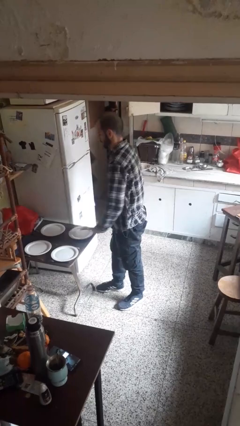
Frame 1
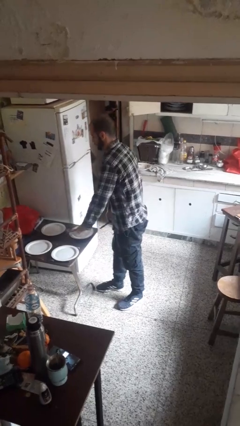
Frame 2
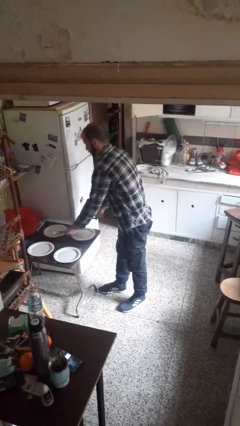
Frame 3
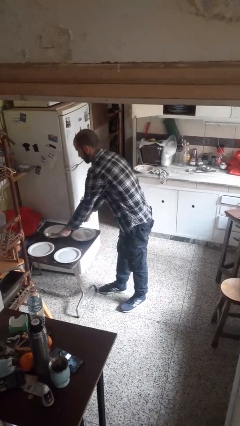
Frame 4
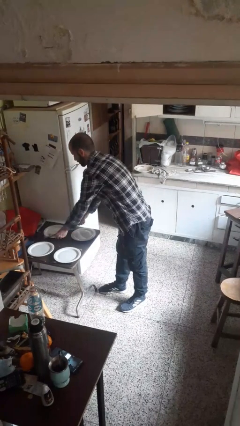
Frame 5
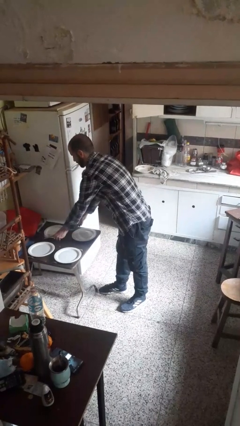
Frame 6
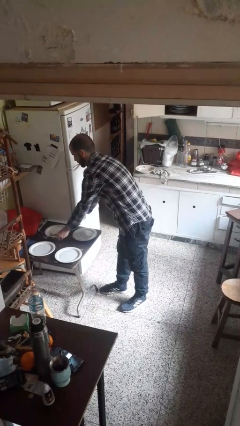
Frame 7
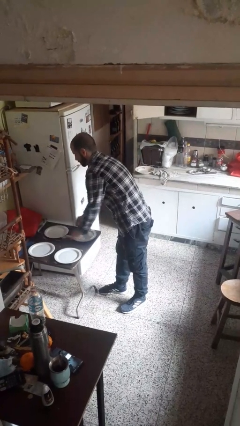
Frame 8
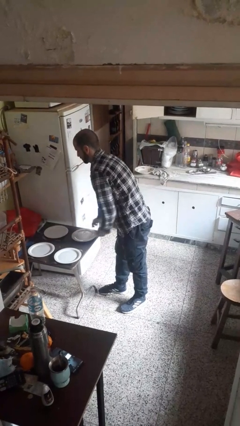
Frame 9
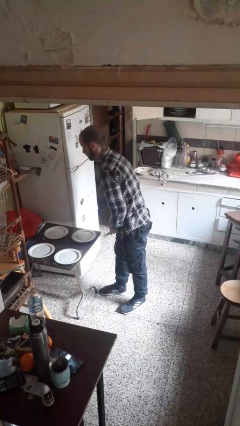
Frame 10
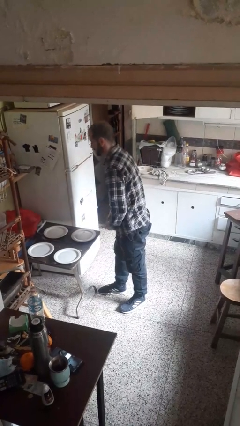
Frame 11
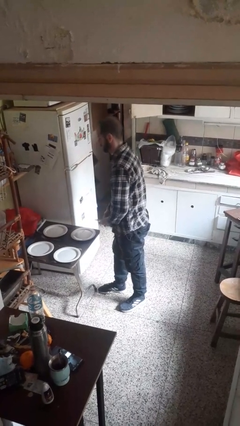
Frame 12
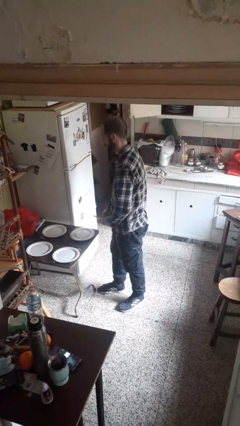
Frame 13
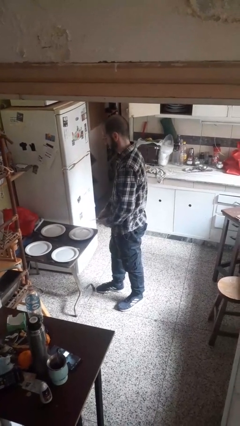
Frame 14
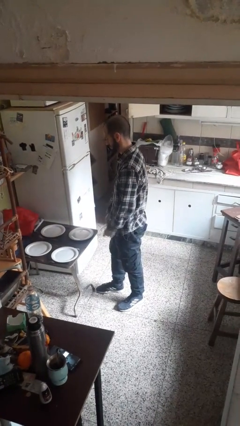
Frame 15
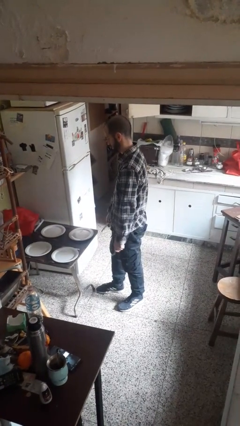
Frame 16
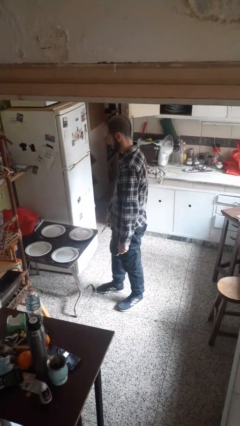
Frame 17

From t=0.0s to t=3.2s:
person sets table

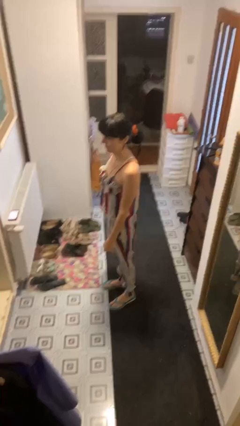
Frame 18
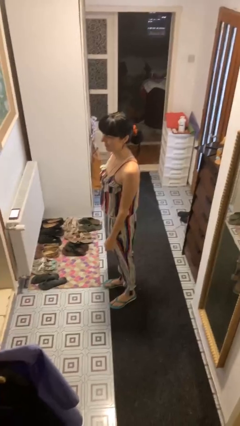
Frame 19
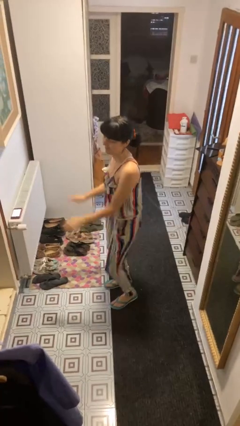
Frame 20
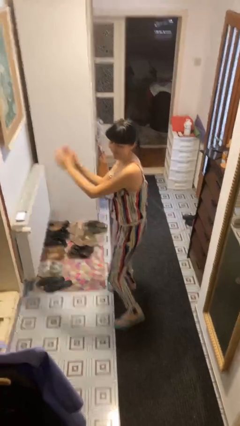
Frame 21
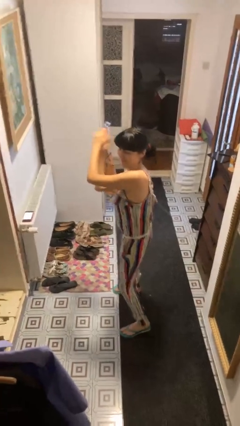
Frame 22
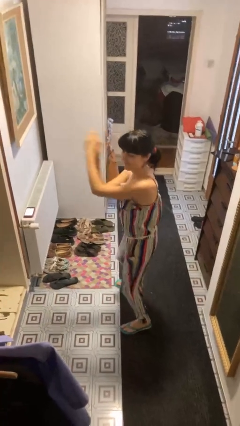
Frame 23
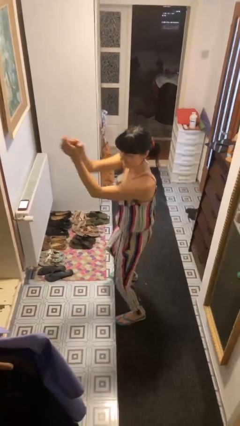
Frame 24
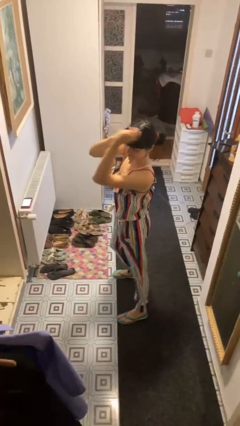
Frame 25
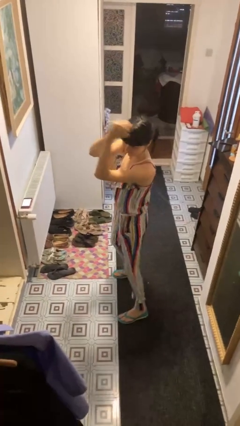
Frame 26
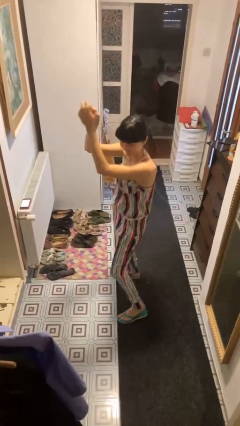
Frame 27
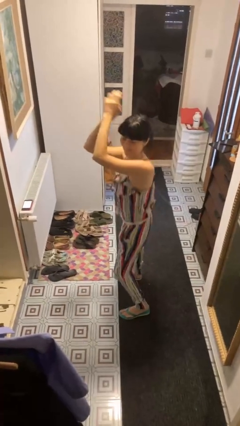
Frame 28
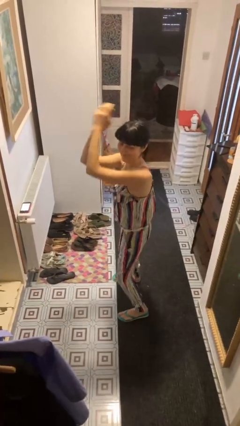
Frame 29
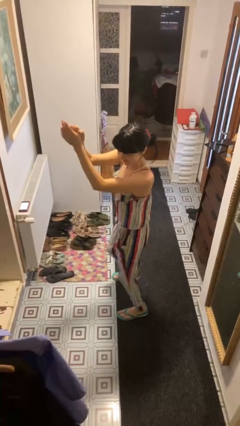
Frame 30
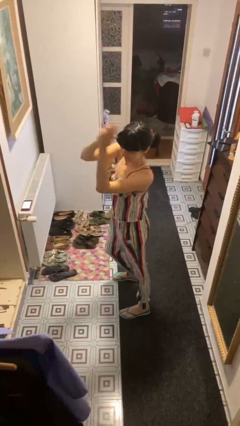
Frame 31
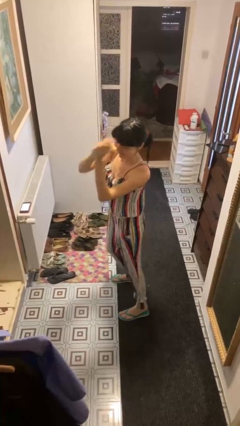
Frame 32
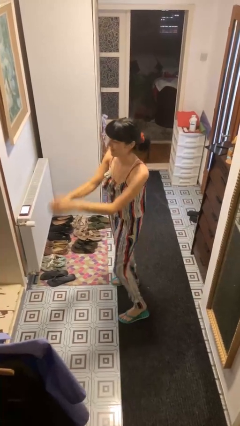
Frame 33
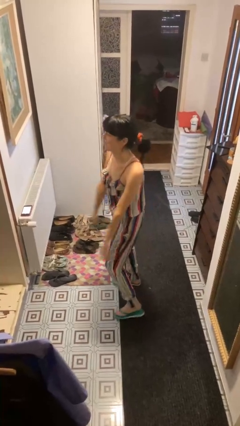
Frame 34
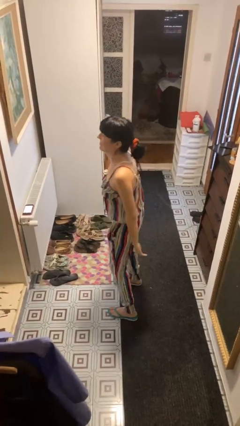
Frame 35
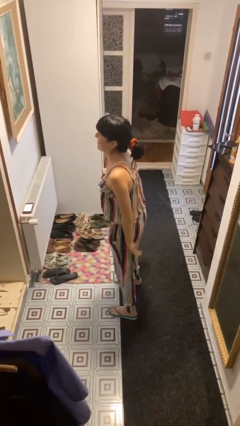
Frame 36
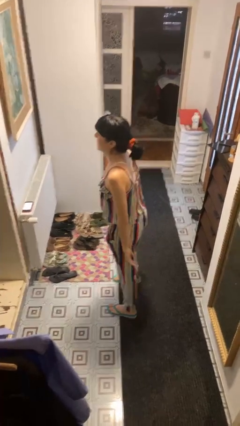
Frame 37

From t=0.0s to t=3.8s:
person dances in place

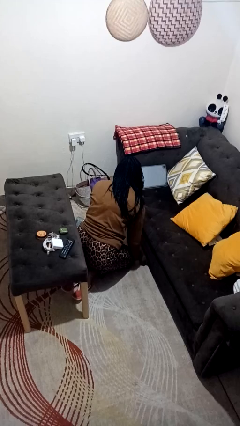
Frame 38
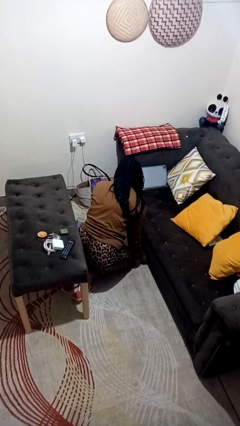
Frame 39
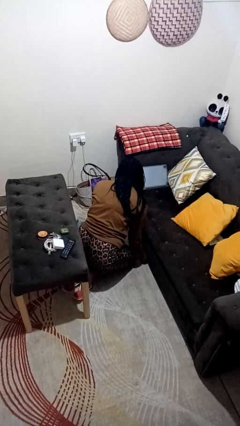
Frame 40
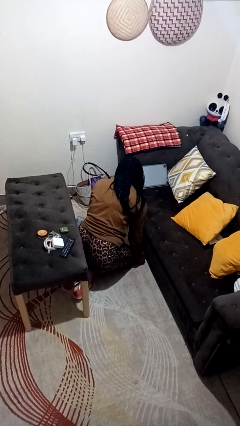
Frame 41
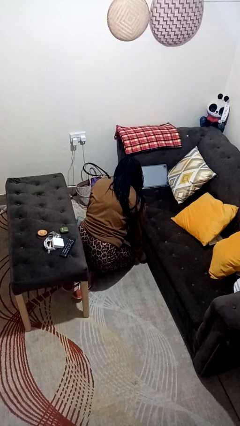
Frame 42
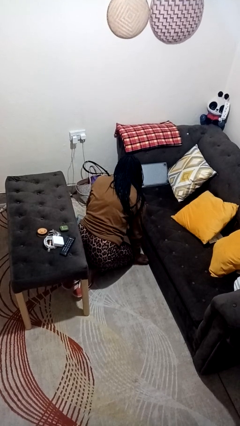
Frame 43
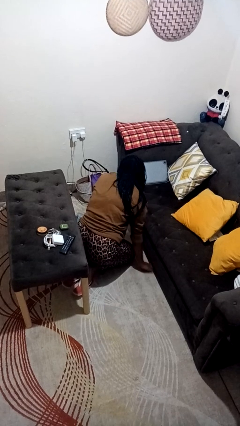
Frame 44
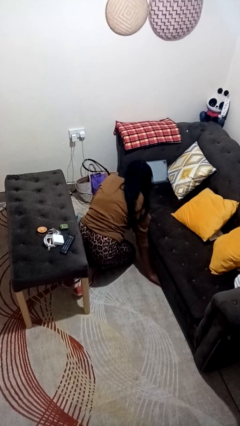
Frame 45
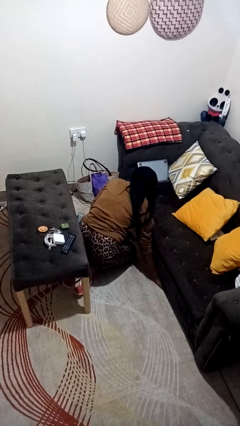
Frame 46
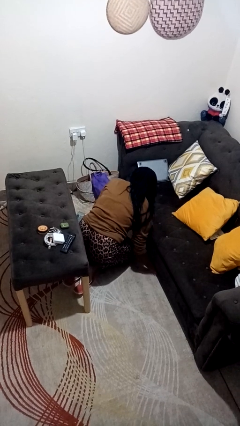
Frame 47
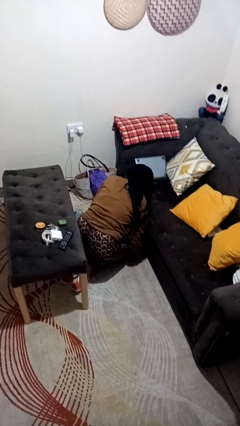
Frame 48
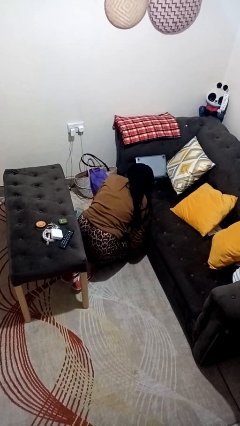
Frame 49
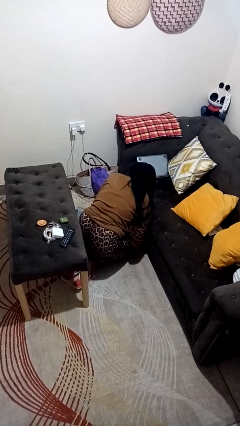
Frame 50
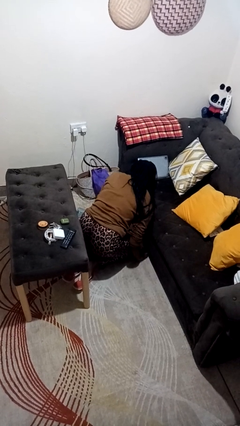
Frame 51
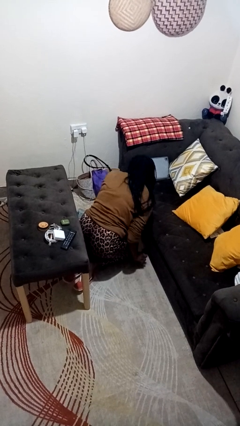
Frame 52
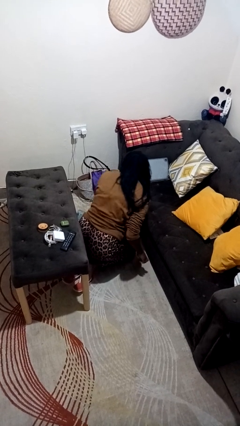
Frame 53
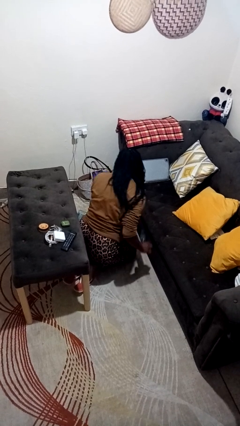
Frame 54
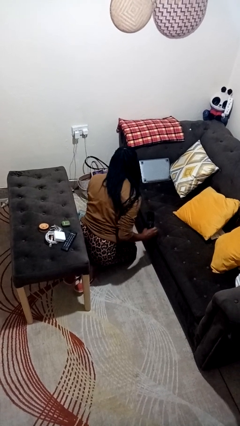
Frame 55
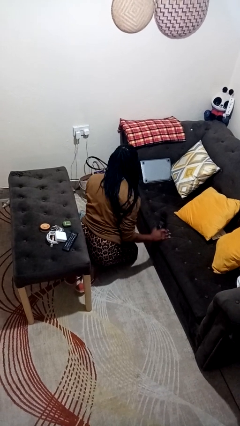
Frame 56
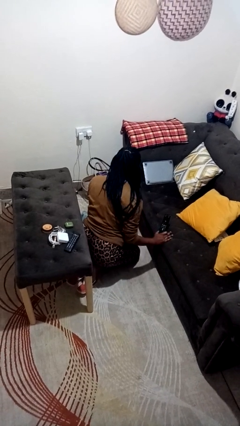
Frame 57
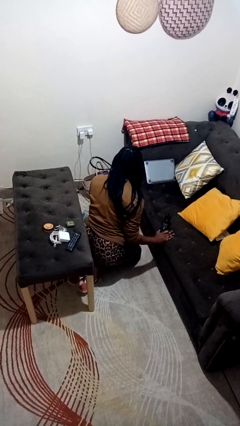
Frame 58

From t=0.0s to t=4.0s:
person searches under couch

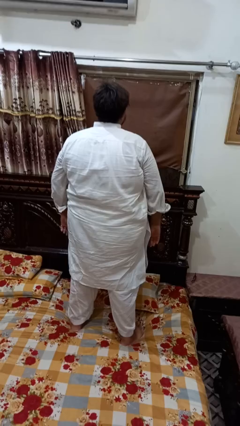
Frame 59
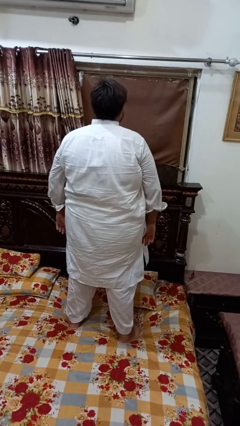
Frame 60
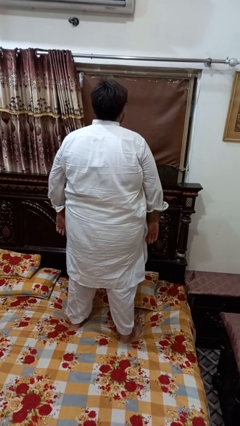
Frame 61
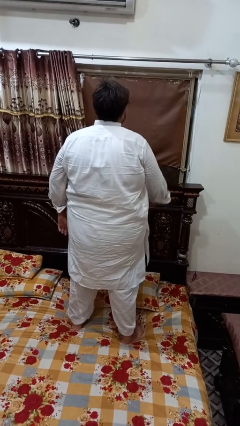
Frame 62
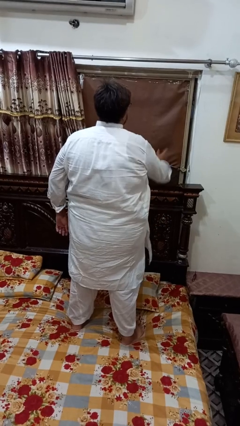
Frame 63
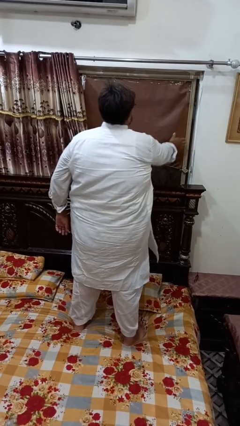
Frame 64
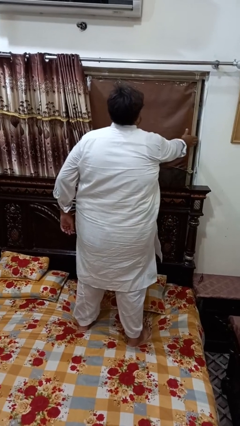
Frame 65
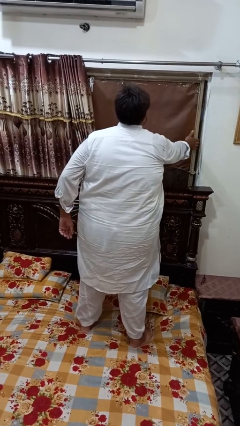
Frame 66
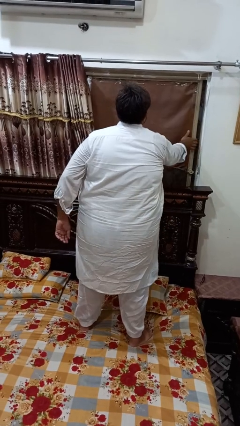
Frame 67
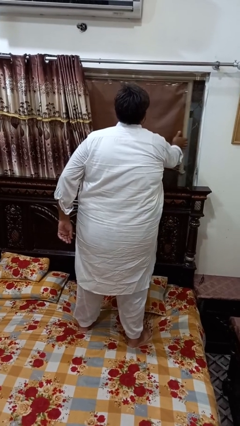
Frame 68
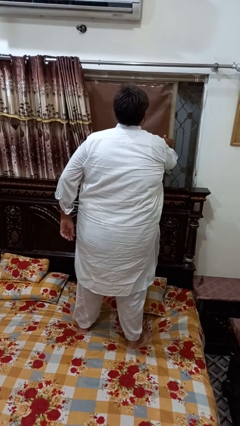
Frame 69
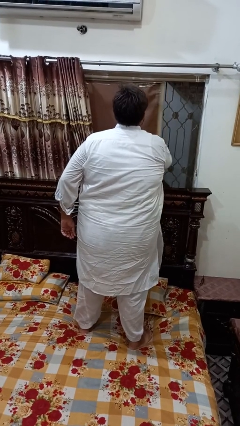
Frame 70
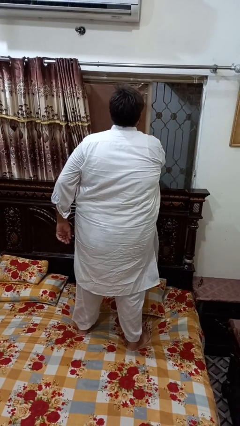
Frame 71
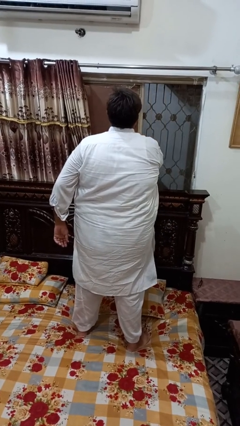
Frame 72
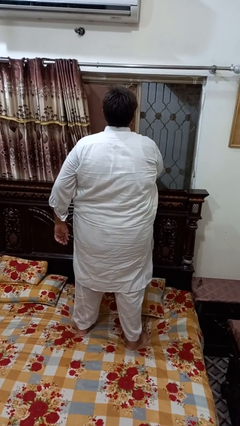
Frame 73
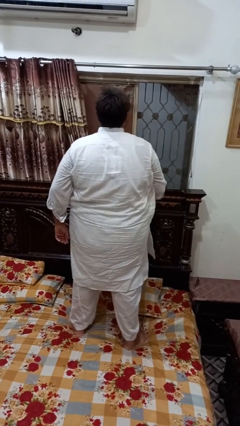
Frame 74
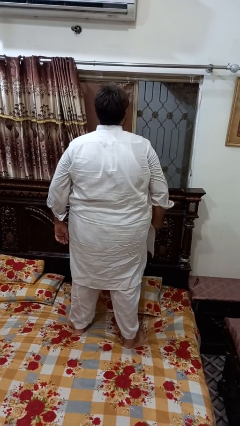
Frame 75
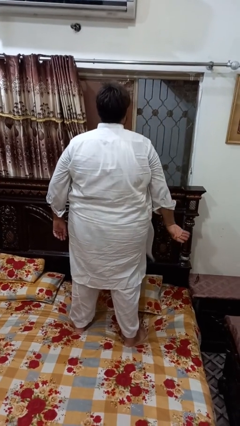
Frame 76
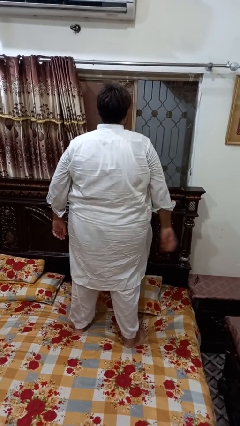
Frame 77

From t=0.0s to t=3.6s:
person opens home window

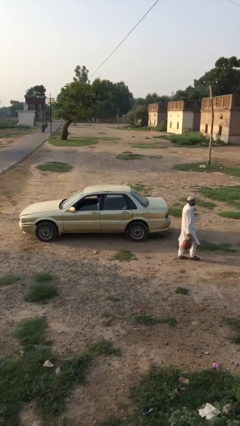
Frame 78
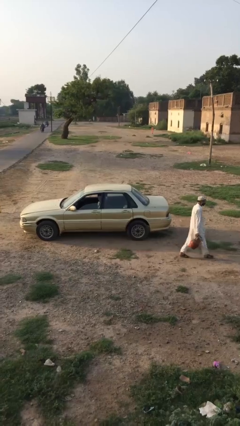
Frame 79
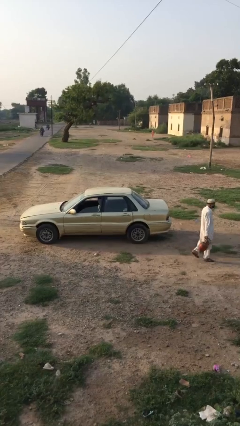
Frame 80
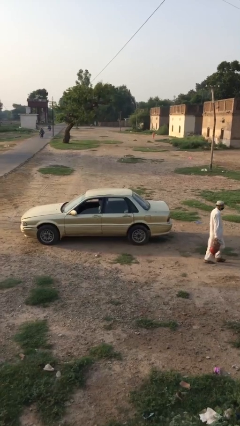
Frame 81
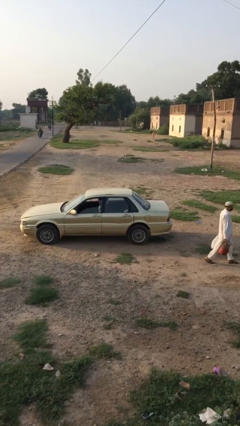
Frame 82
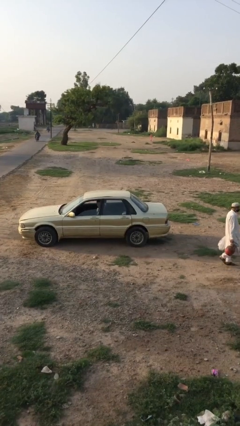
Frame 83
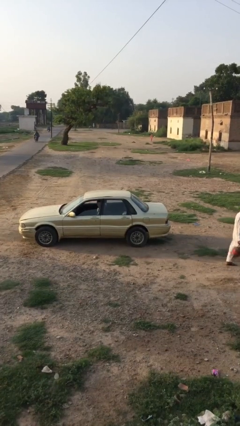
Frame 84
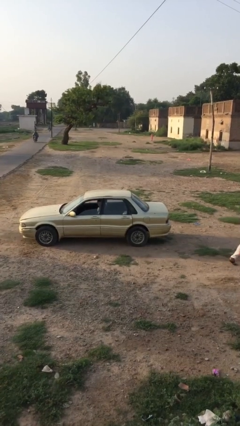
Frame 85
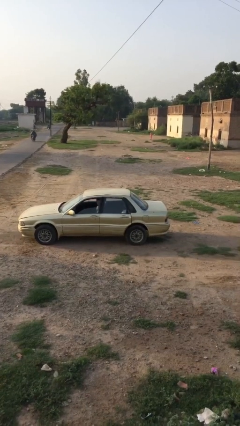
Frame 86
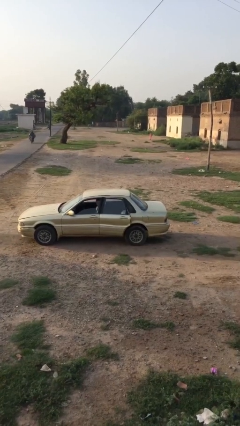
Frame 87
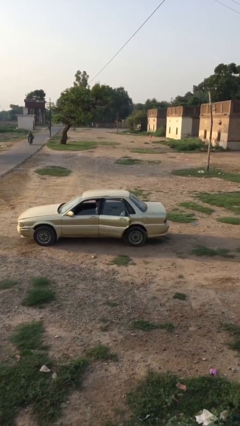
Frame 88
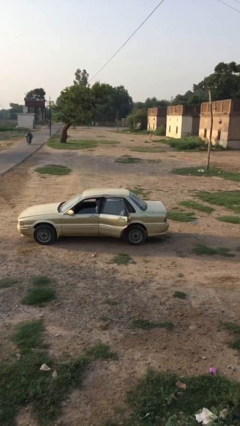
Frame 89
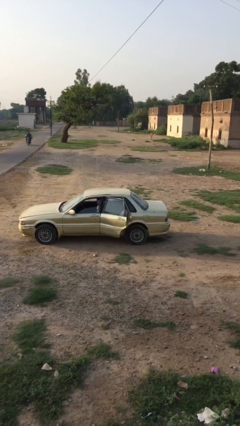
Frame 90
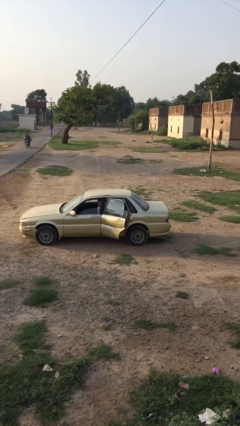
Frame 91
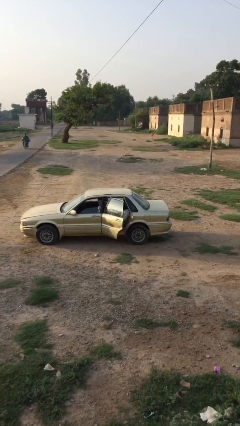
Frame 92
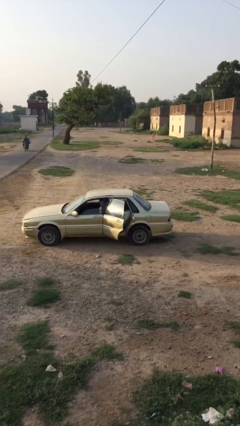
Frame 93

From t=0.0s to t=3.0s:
person opens car door

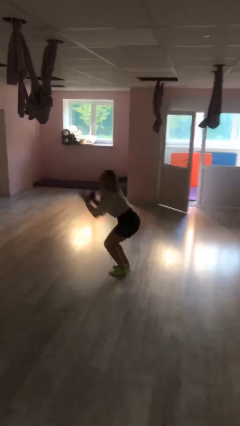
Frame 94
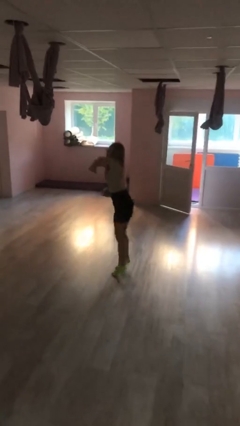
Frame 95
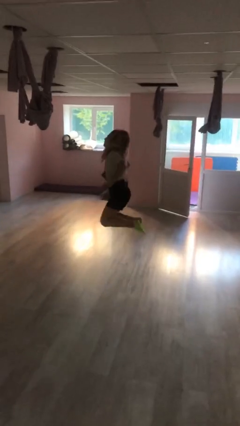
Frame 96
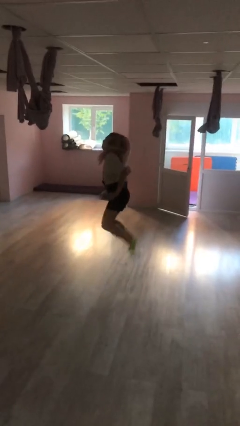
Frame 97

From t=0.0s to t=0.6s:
person jumps
